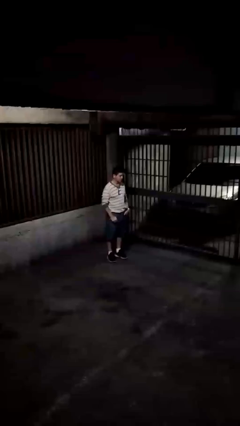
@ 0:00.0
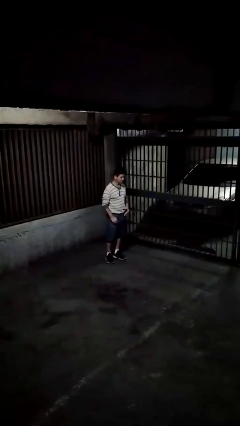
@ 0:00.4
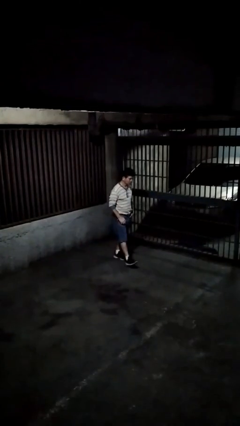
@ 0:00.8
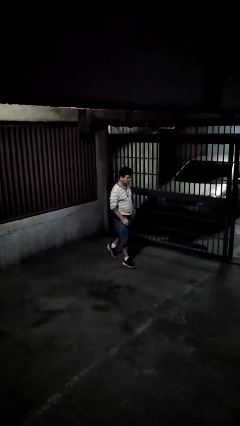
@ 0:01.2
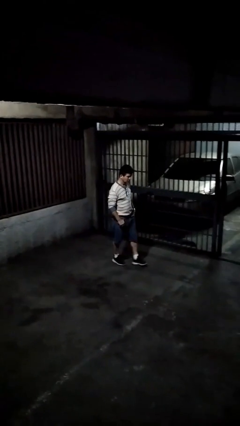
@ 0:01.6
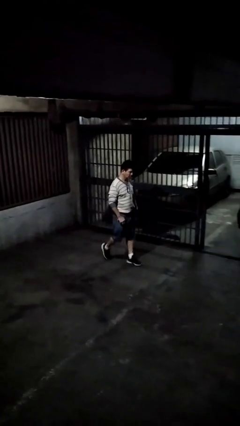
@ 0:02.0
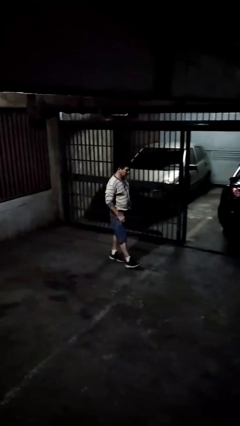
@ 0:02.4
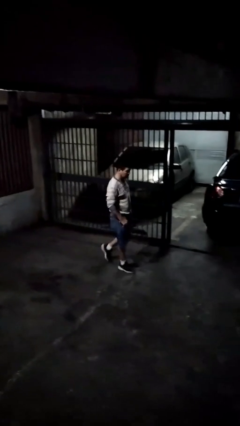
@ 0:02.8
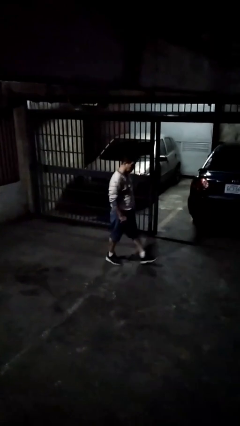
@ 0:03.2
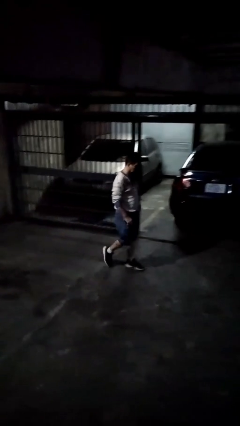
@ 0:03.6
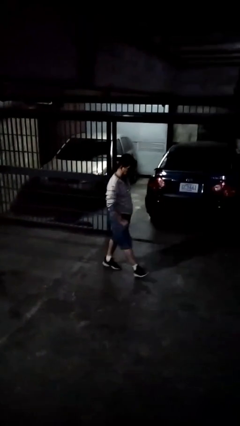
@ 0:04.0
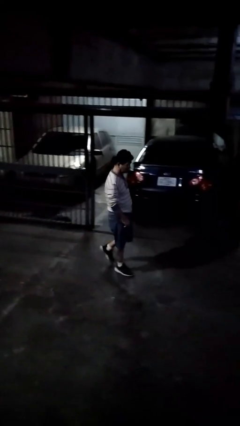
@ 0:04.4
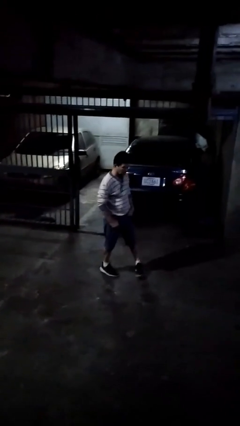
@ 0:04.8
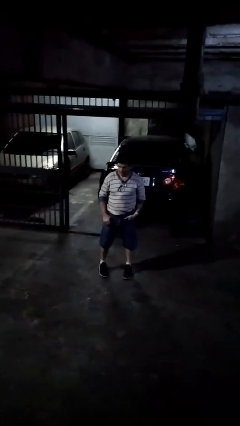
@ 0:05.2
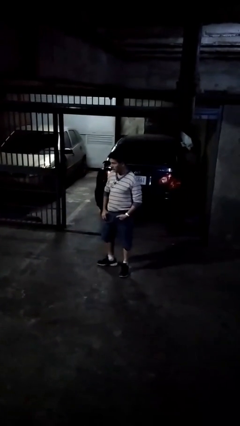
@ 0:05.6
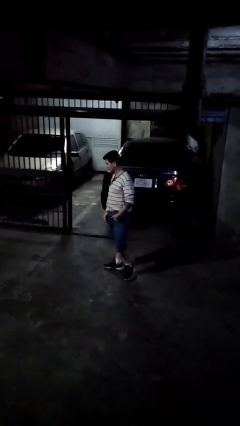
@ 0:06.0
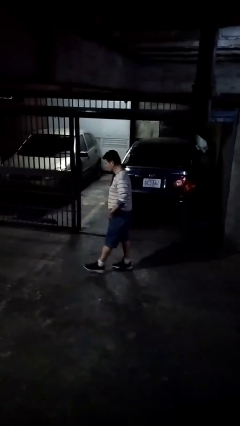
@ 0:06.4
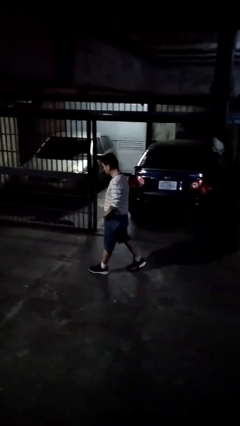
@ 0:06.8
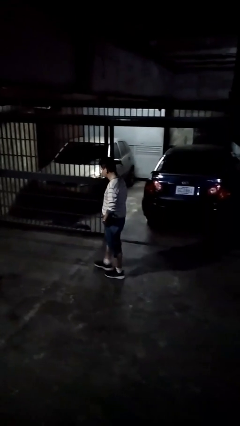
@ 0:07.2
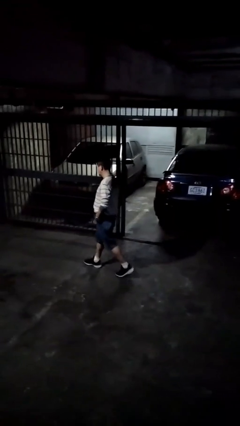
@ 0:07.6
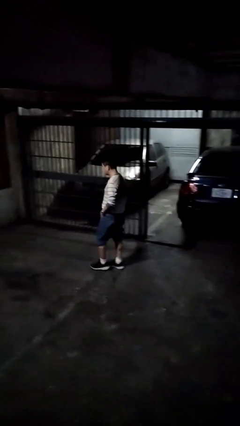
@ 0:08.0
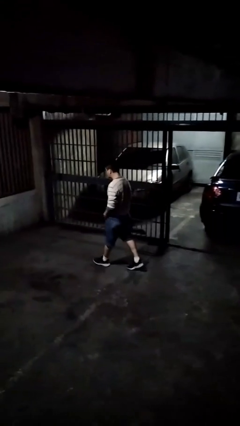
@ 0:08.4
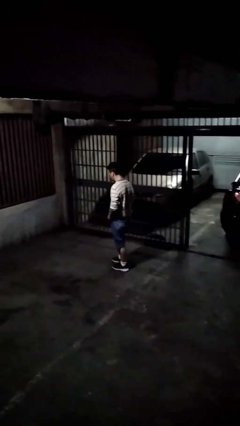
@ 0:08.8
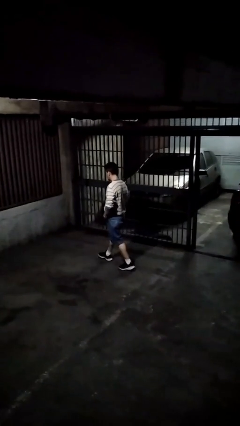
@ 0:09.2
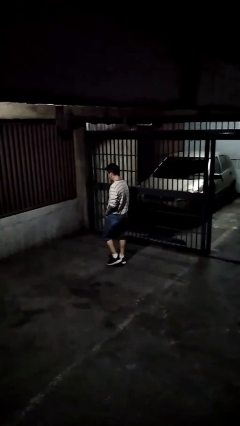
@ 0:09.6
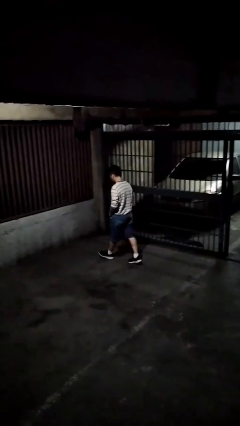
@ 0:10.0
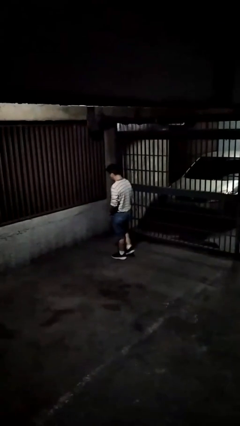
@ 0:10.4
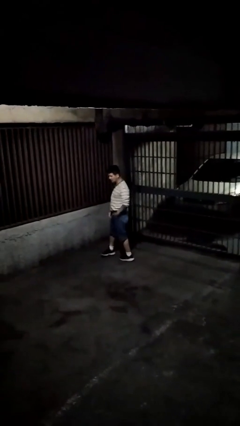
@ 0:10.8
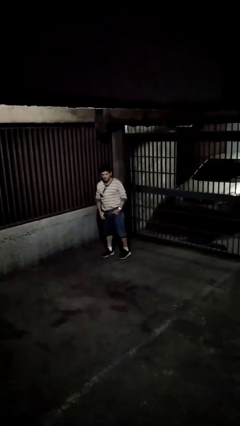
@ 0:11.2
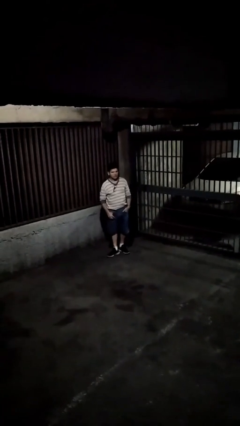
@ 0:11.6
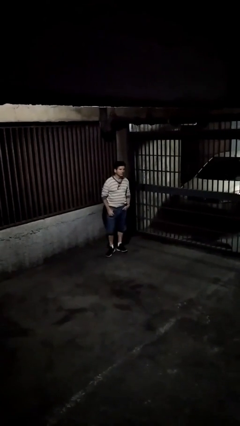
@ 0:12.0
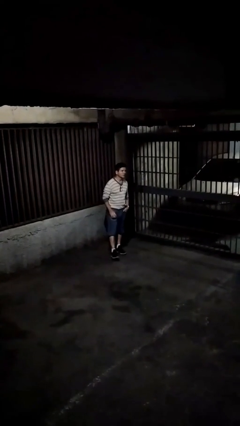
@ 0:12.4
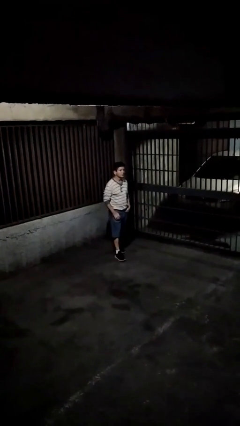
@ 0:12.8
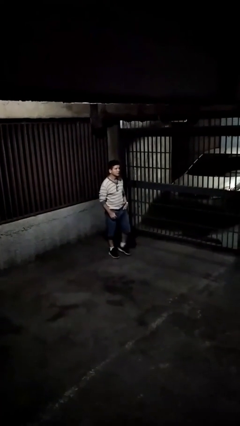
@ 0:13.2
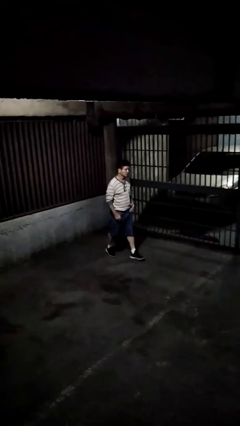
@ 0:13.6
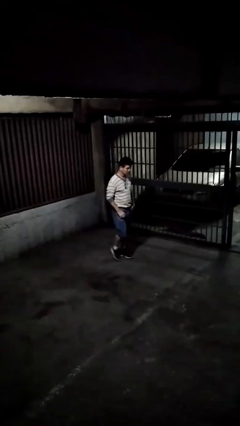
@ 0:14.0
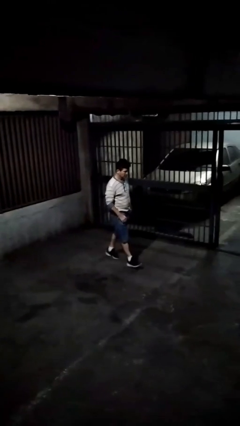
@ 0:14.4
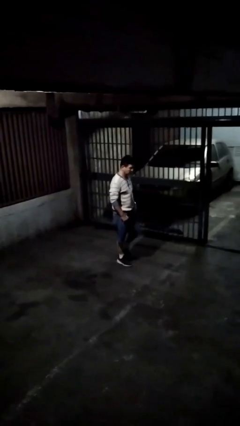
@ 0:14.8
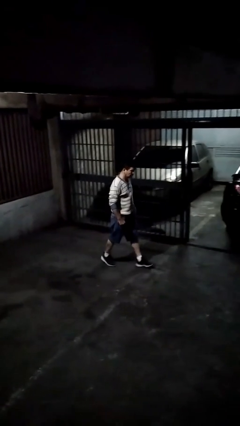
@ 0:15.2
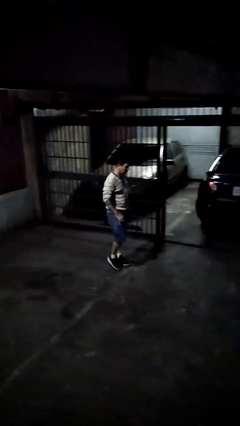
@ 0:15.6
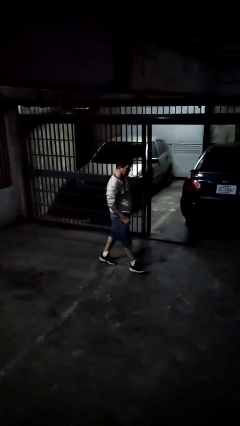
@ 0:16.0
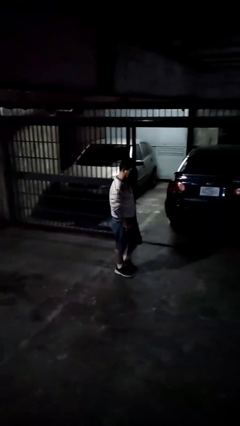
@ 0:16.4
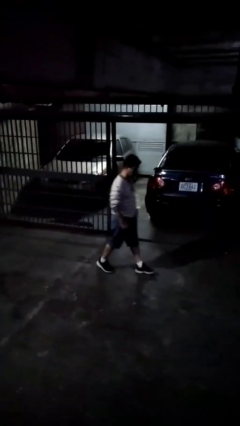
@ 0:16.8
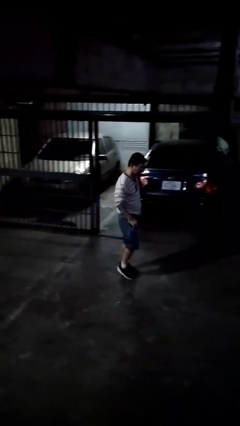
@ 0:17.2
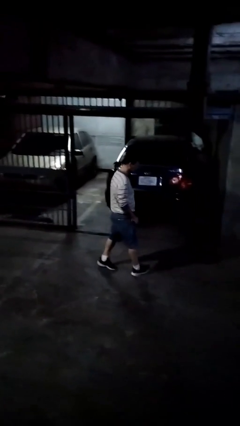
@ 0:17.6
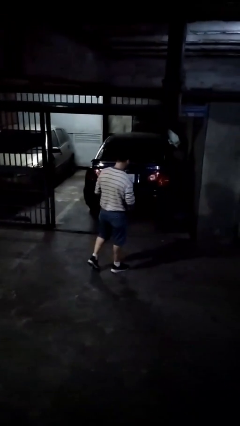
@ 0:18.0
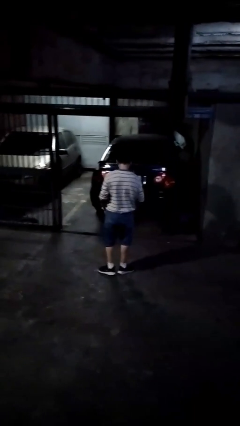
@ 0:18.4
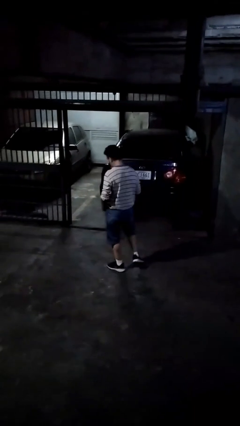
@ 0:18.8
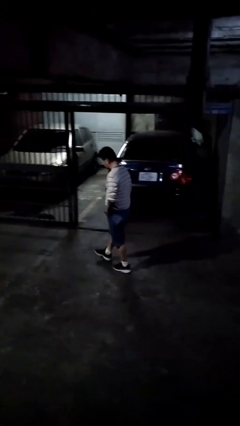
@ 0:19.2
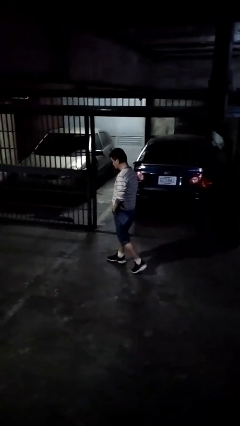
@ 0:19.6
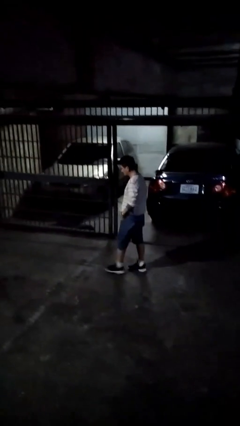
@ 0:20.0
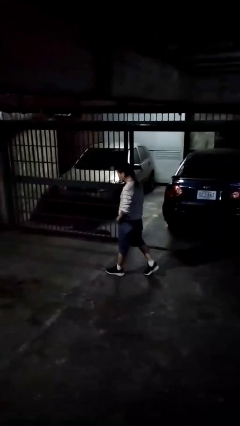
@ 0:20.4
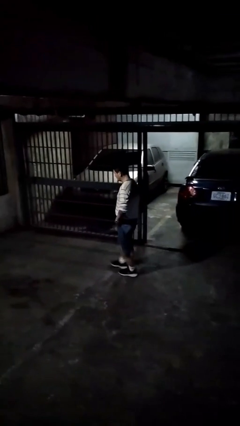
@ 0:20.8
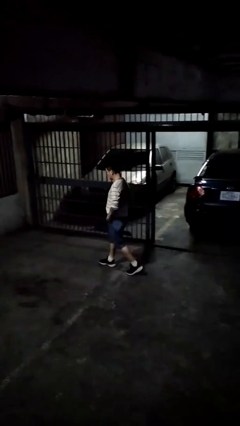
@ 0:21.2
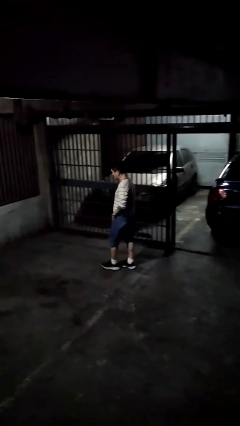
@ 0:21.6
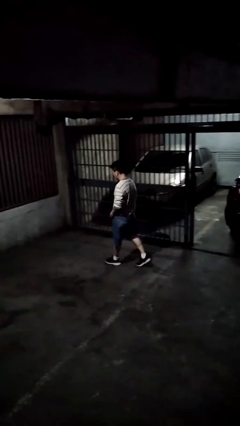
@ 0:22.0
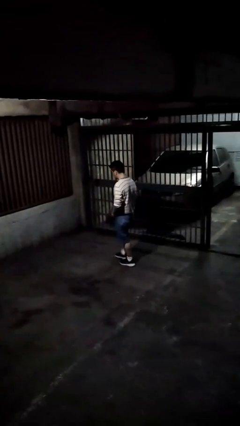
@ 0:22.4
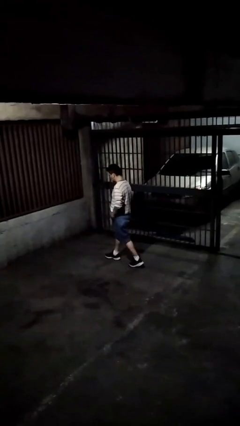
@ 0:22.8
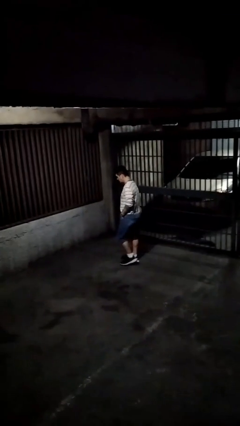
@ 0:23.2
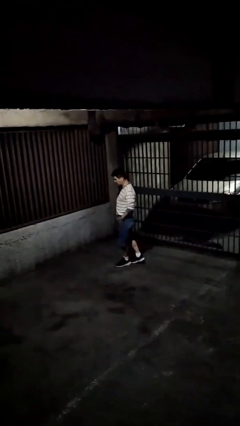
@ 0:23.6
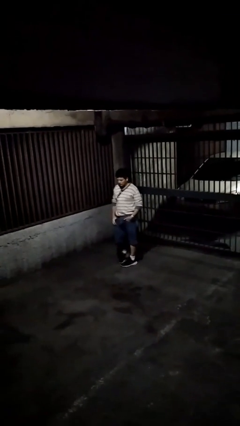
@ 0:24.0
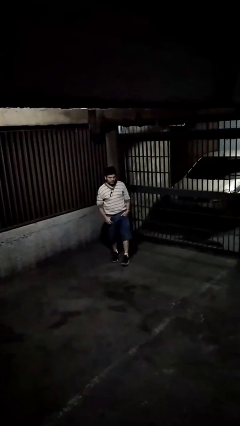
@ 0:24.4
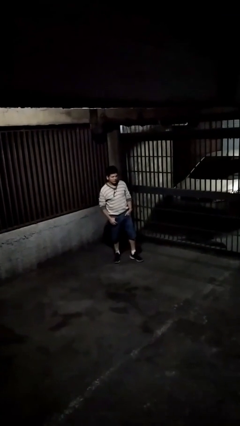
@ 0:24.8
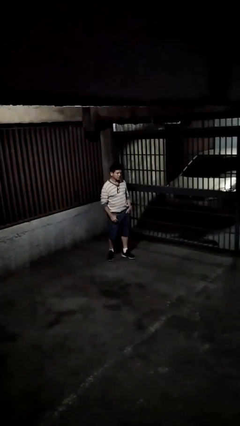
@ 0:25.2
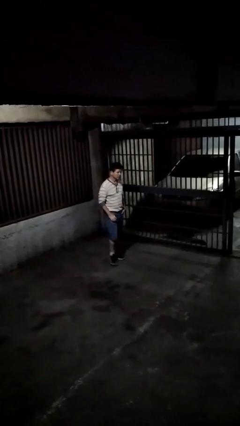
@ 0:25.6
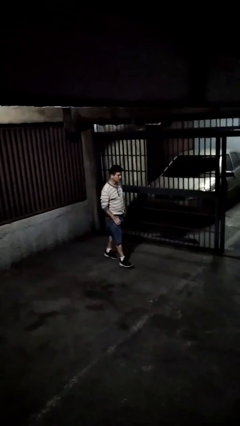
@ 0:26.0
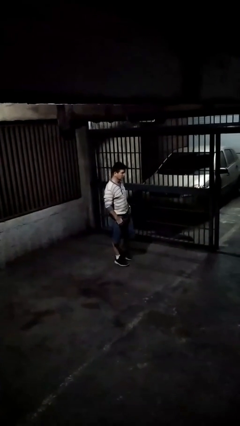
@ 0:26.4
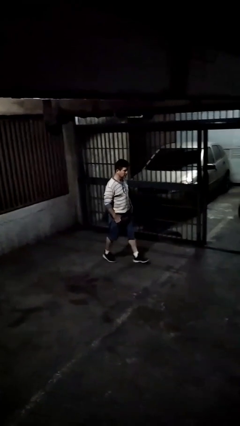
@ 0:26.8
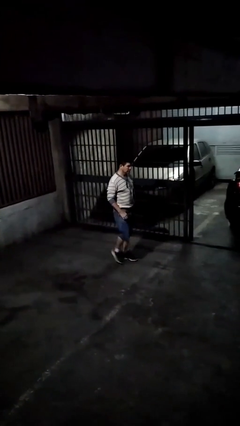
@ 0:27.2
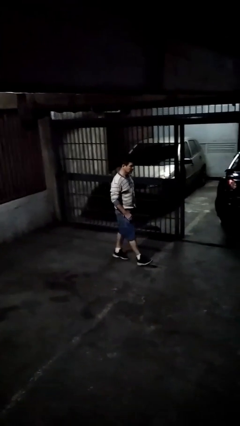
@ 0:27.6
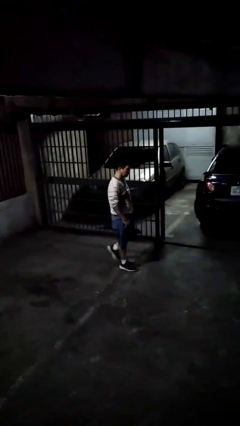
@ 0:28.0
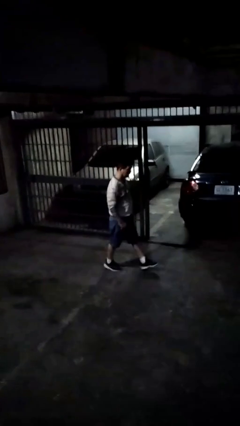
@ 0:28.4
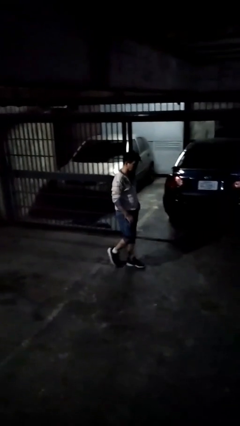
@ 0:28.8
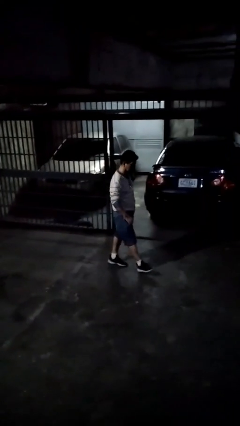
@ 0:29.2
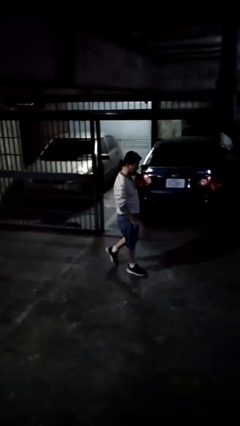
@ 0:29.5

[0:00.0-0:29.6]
person walks

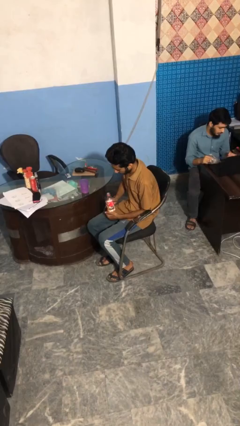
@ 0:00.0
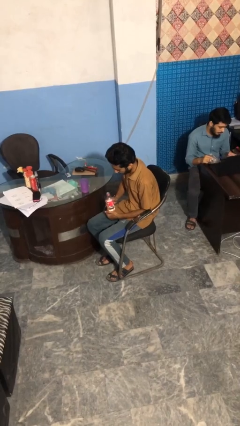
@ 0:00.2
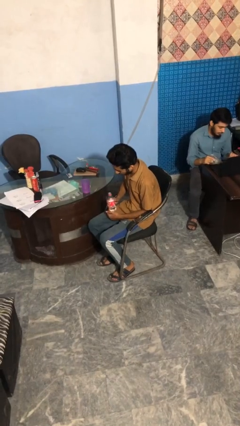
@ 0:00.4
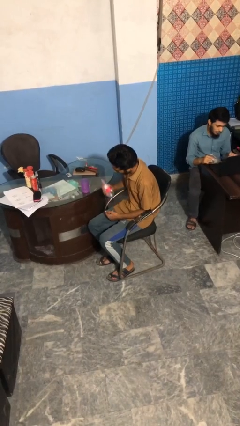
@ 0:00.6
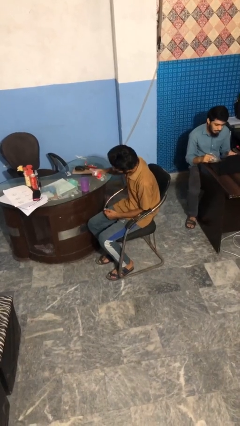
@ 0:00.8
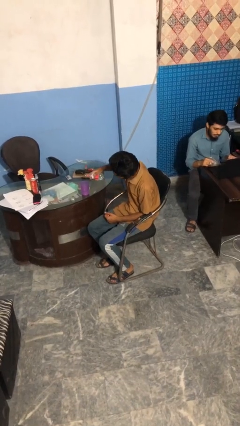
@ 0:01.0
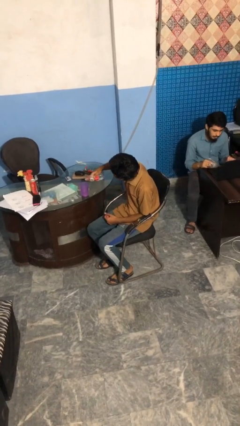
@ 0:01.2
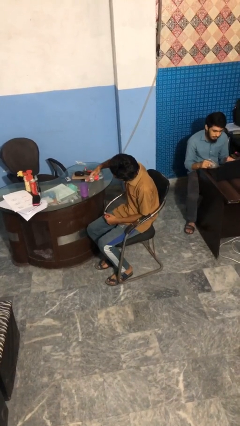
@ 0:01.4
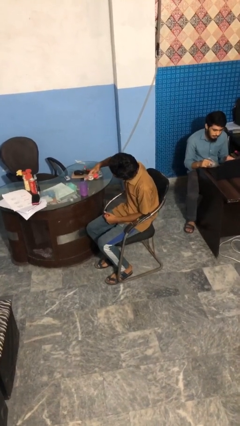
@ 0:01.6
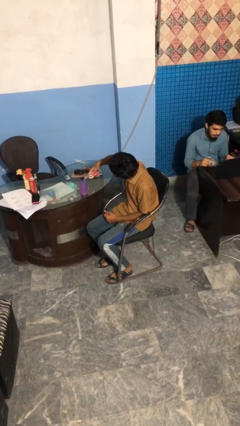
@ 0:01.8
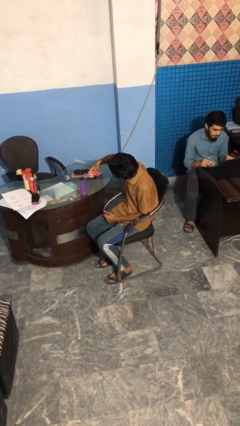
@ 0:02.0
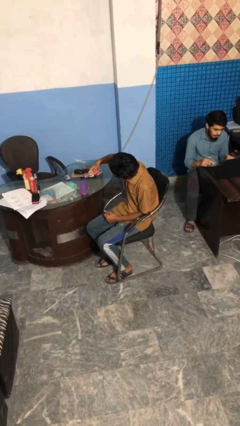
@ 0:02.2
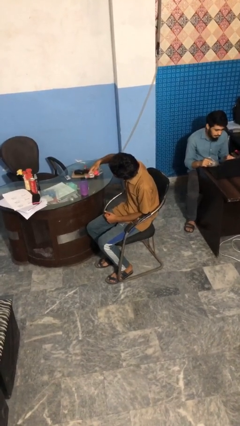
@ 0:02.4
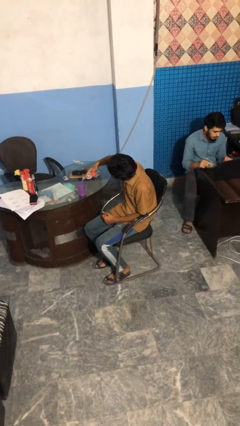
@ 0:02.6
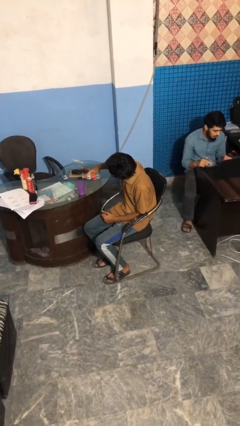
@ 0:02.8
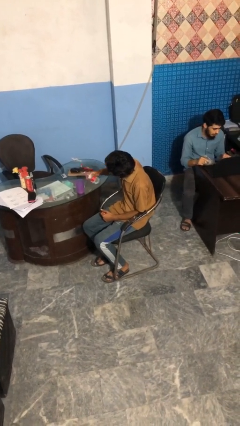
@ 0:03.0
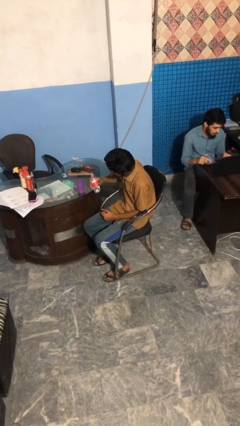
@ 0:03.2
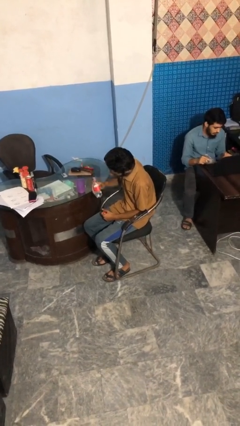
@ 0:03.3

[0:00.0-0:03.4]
person pours liquid into cup
